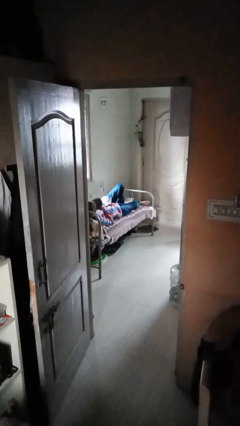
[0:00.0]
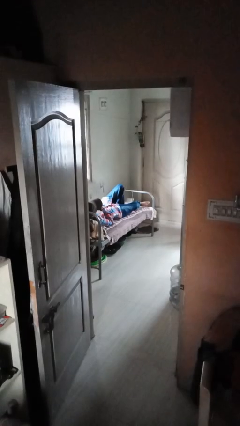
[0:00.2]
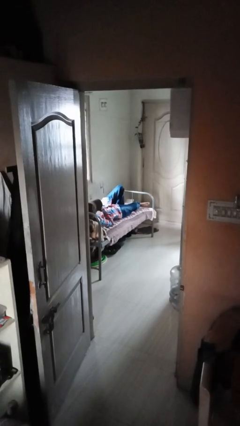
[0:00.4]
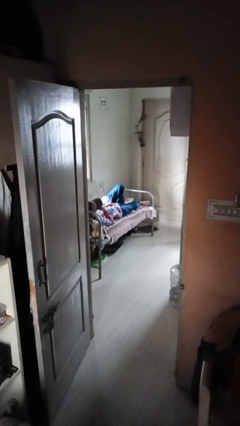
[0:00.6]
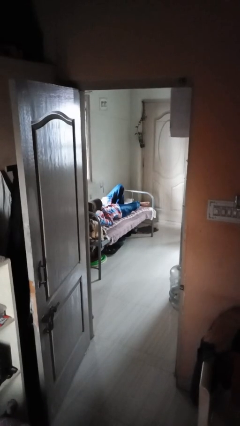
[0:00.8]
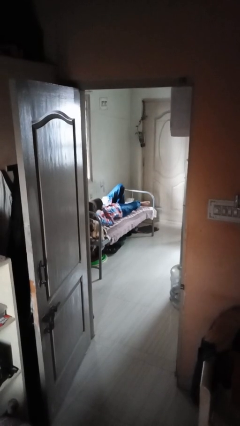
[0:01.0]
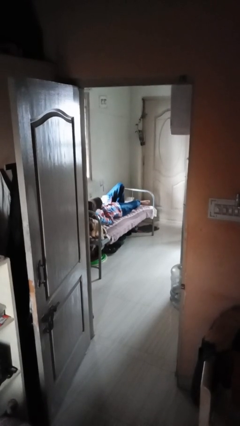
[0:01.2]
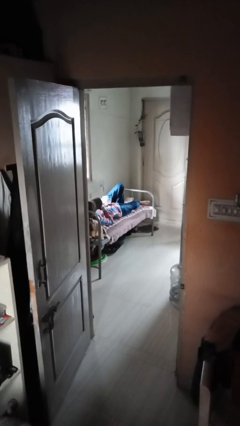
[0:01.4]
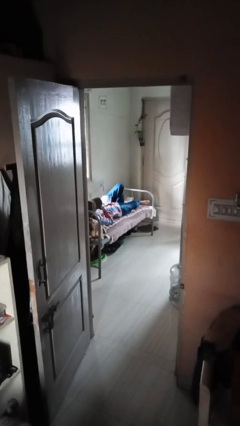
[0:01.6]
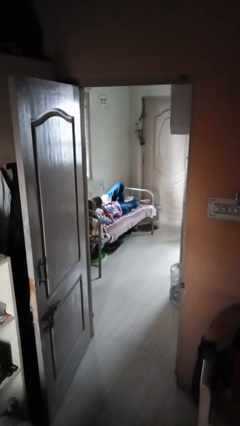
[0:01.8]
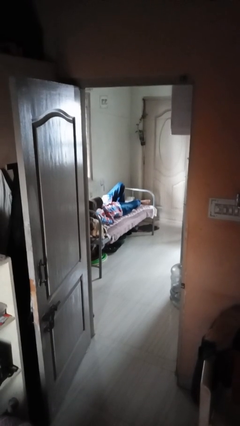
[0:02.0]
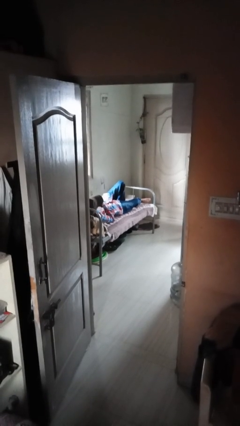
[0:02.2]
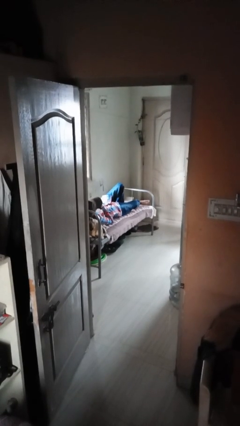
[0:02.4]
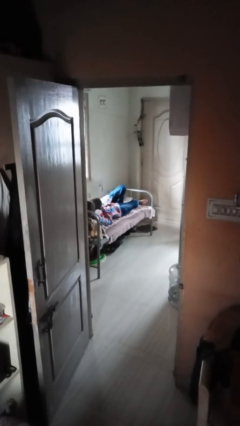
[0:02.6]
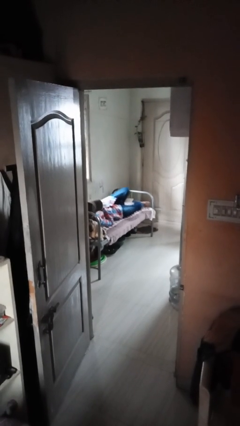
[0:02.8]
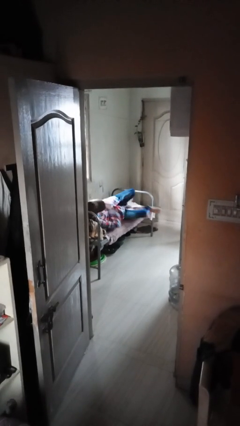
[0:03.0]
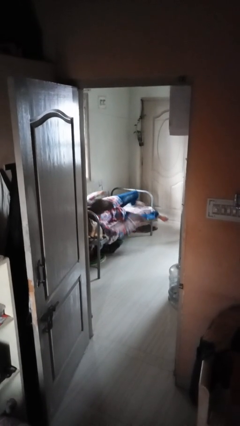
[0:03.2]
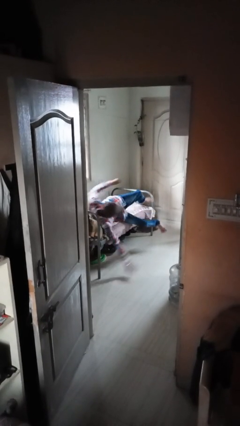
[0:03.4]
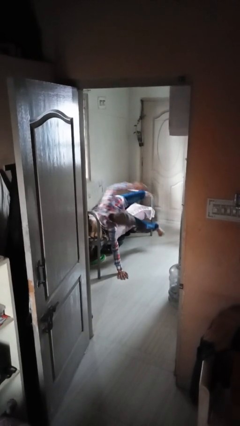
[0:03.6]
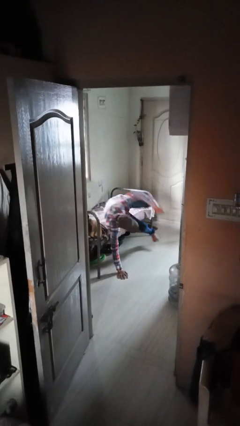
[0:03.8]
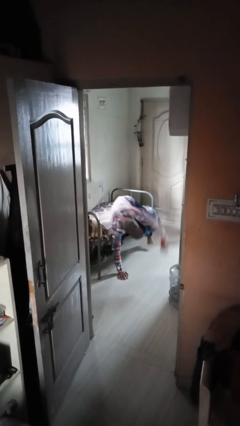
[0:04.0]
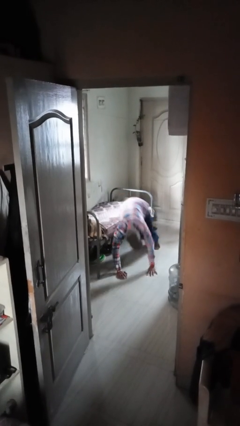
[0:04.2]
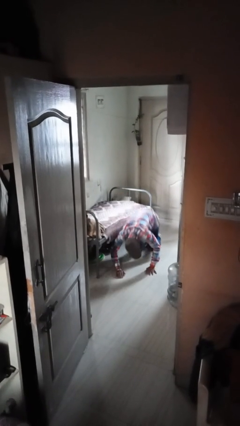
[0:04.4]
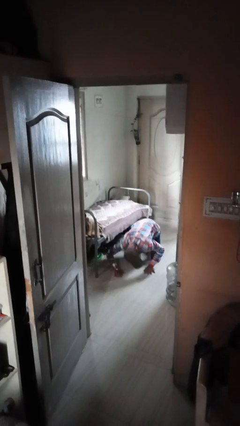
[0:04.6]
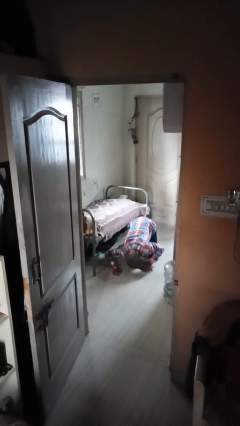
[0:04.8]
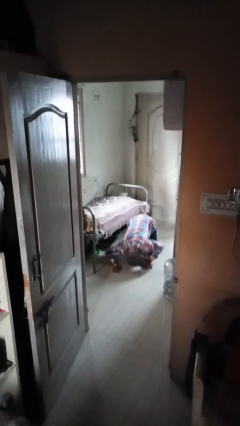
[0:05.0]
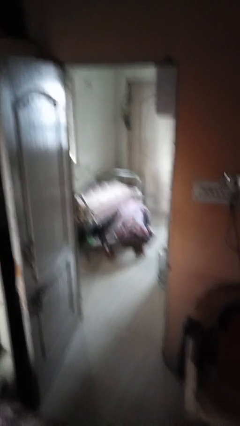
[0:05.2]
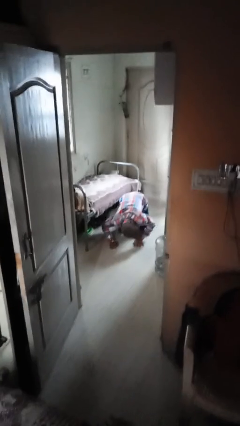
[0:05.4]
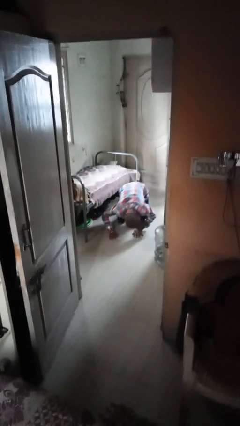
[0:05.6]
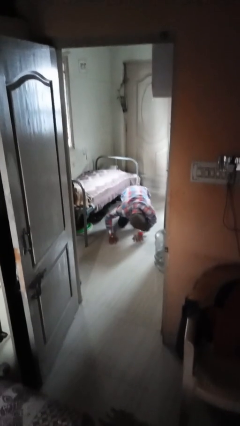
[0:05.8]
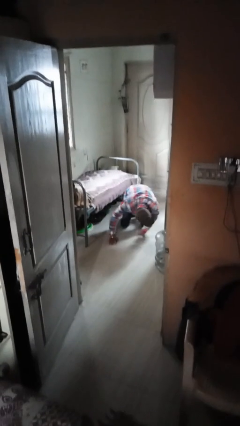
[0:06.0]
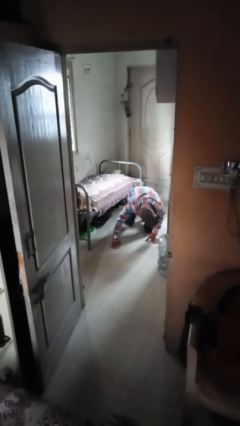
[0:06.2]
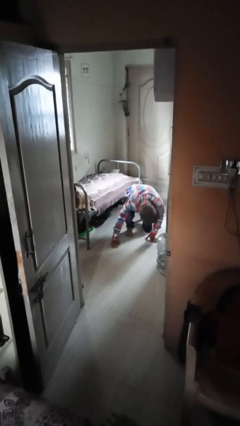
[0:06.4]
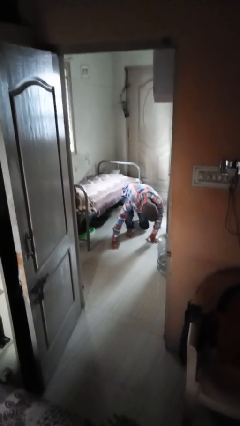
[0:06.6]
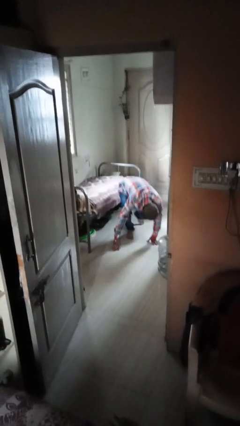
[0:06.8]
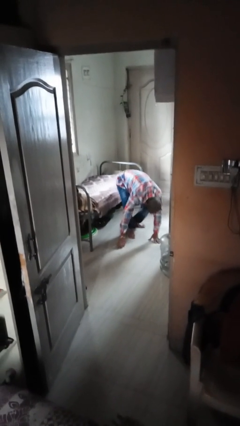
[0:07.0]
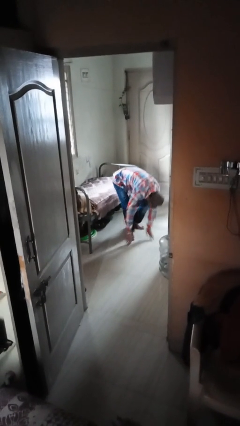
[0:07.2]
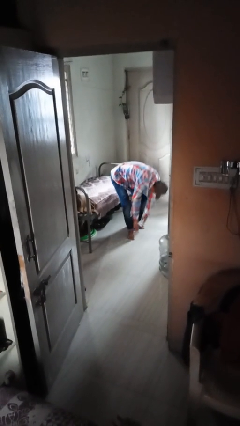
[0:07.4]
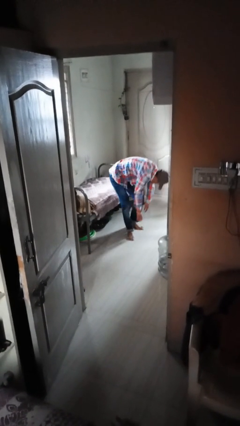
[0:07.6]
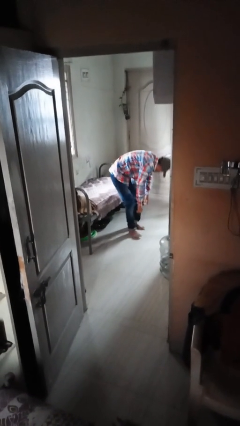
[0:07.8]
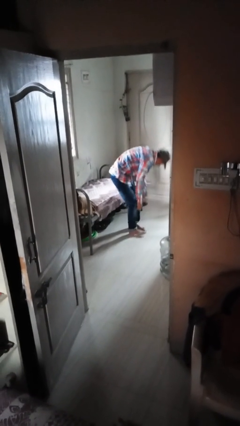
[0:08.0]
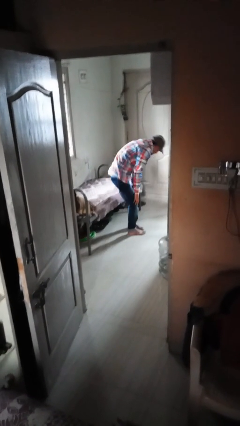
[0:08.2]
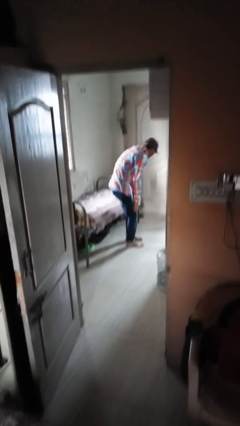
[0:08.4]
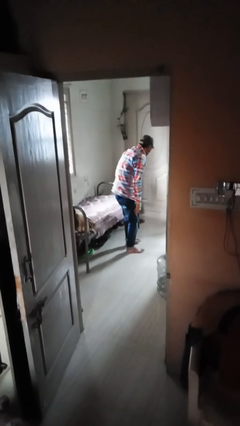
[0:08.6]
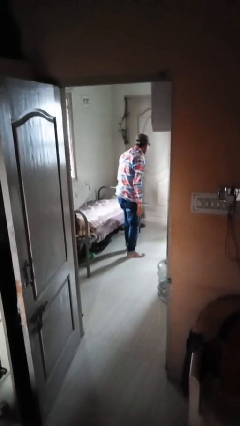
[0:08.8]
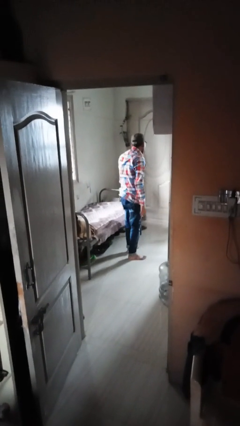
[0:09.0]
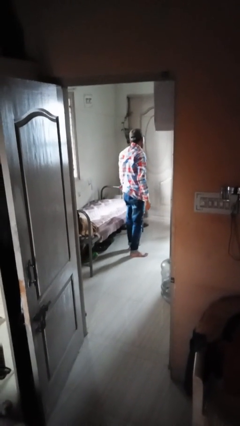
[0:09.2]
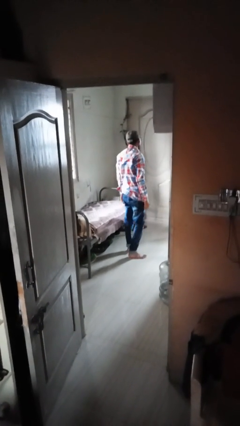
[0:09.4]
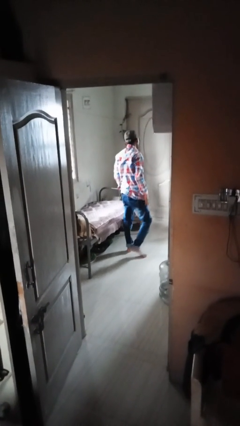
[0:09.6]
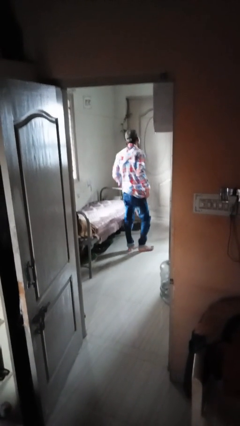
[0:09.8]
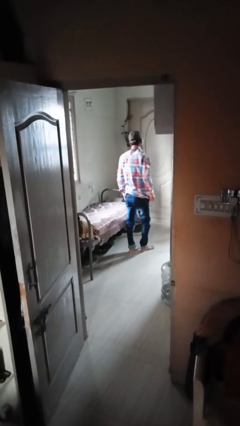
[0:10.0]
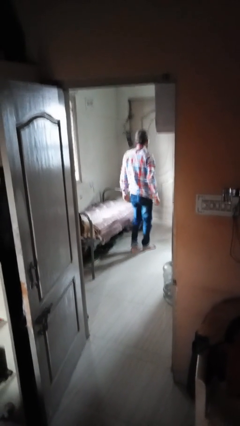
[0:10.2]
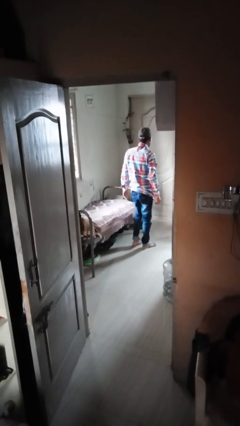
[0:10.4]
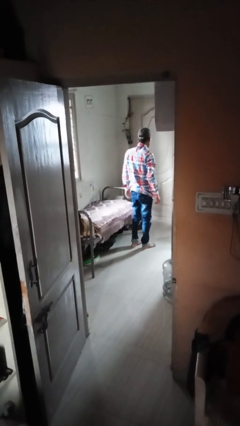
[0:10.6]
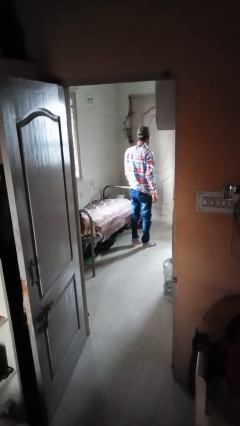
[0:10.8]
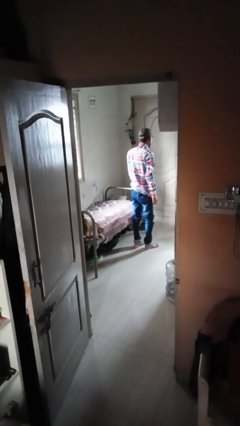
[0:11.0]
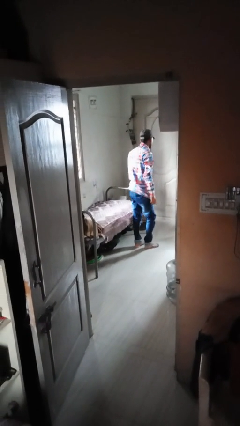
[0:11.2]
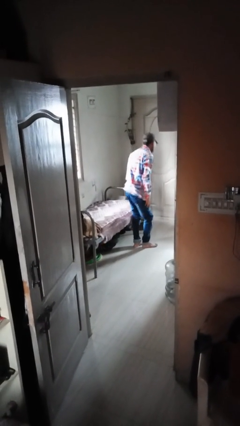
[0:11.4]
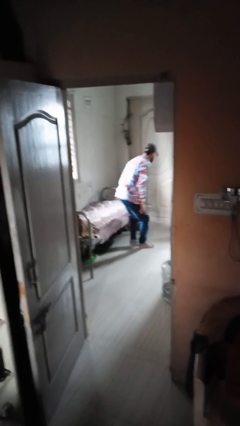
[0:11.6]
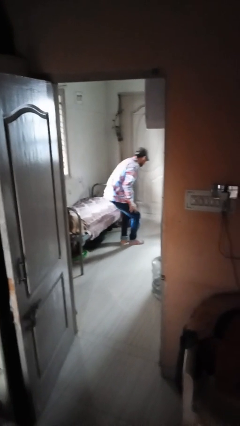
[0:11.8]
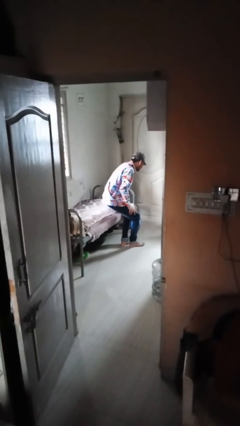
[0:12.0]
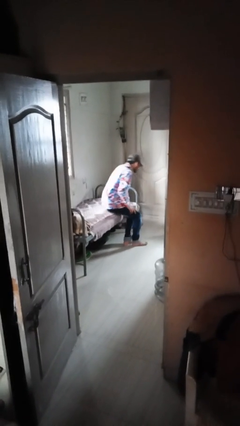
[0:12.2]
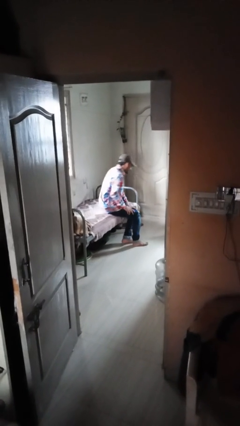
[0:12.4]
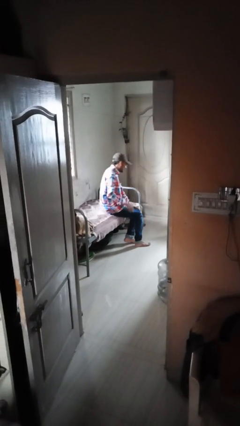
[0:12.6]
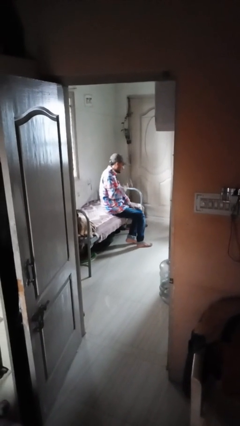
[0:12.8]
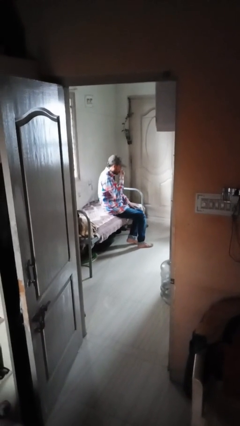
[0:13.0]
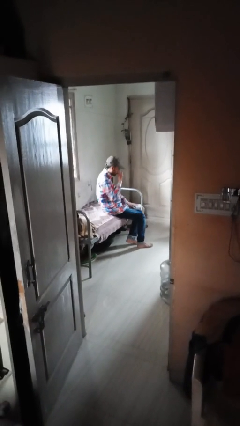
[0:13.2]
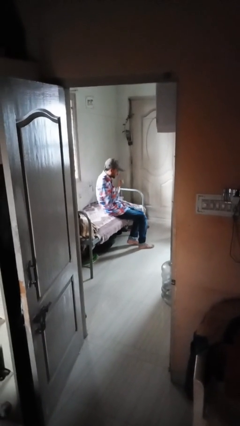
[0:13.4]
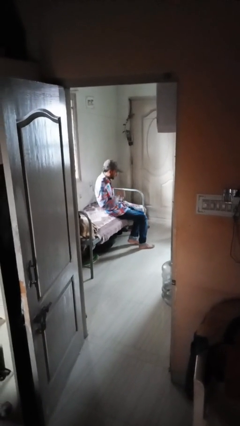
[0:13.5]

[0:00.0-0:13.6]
person falls from bed

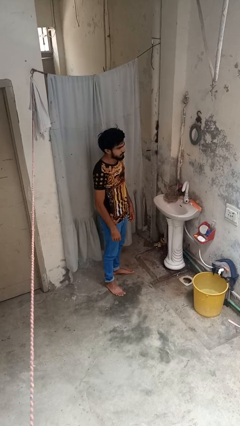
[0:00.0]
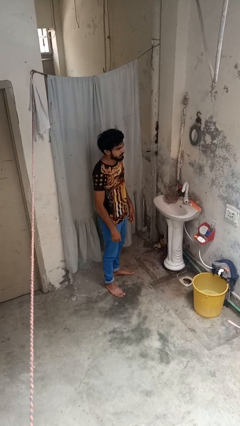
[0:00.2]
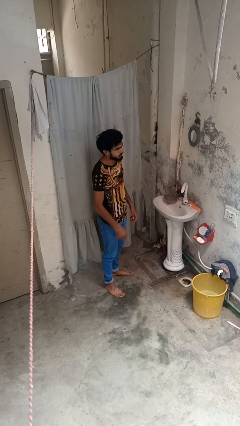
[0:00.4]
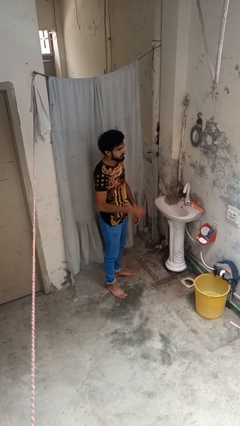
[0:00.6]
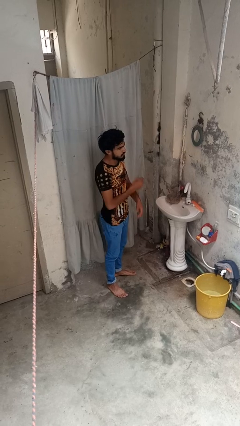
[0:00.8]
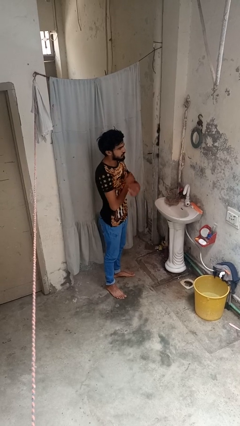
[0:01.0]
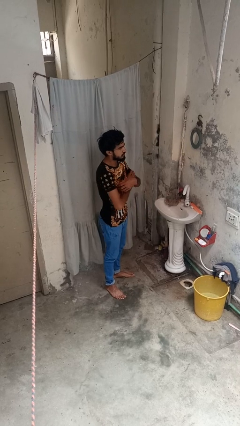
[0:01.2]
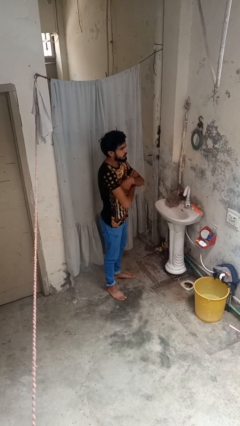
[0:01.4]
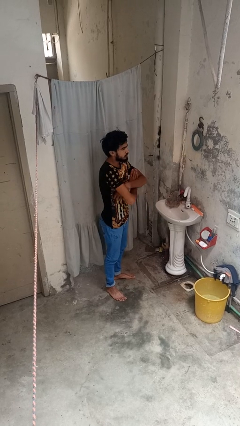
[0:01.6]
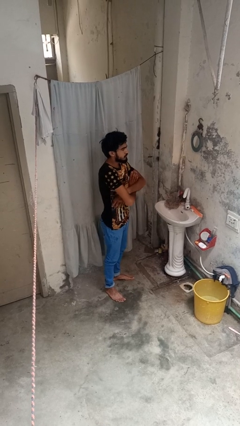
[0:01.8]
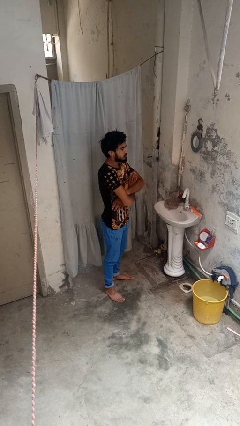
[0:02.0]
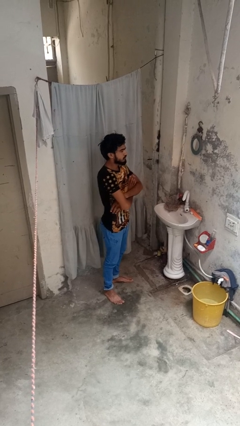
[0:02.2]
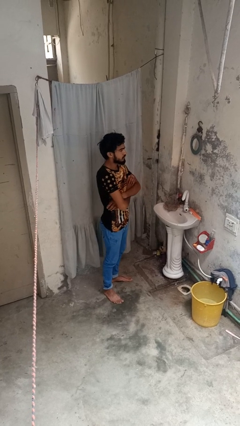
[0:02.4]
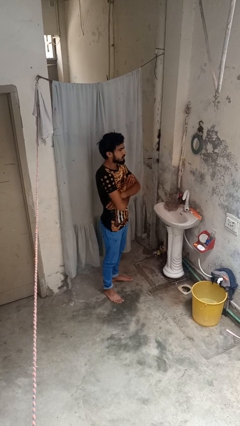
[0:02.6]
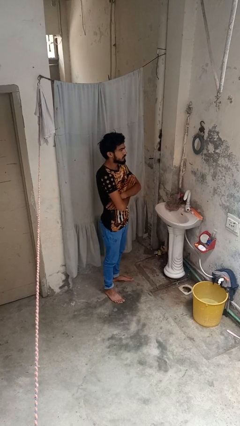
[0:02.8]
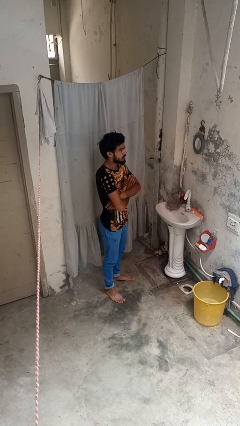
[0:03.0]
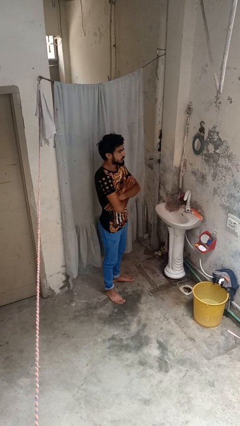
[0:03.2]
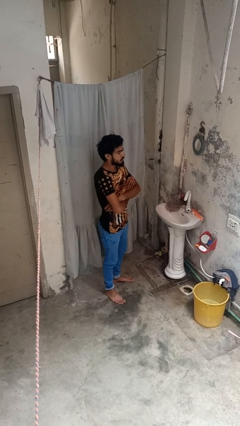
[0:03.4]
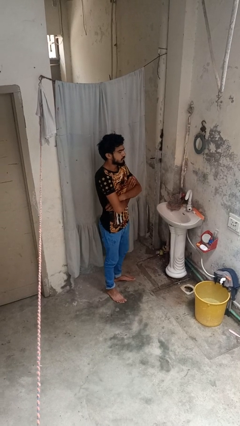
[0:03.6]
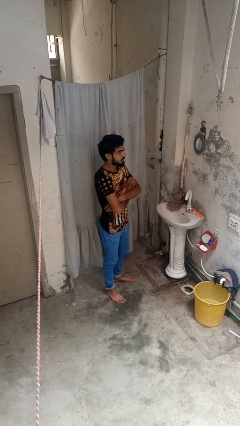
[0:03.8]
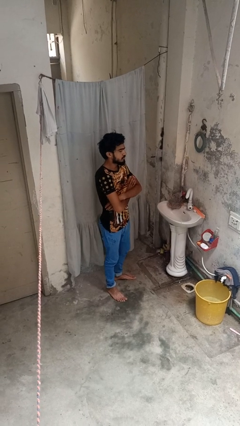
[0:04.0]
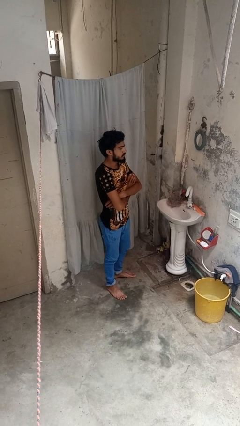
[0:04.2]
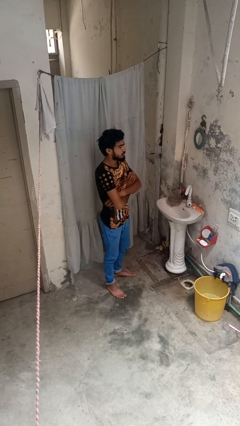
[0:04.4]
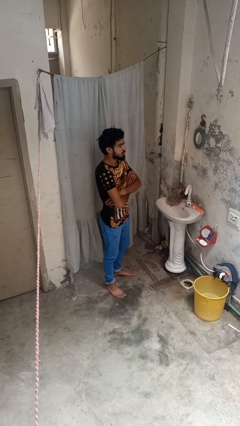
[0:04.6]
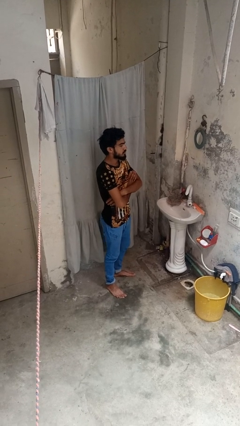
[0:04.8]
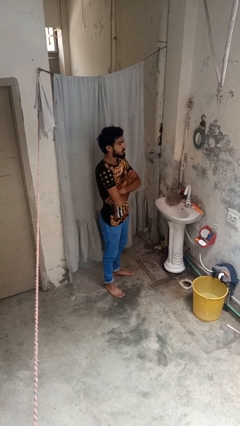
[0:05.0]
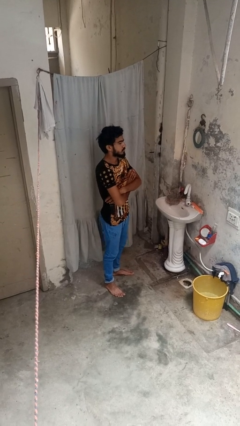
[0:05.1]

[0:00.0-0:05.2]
person crosses arms
